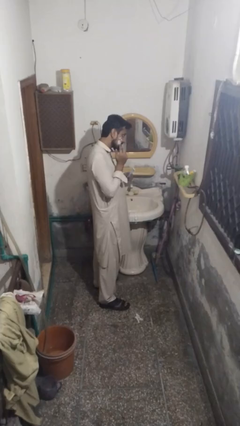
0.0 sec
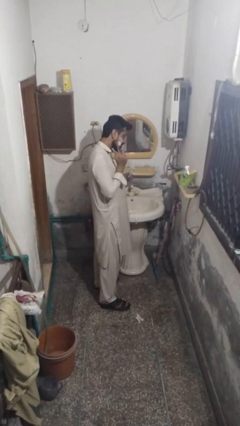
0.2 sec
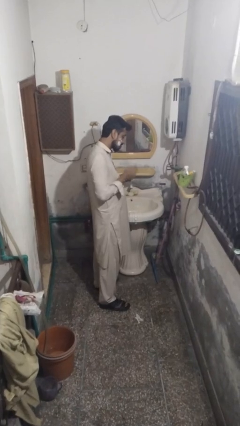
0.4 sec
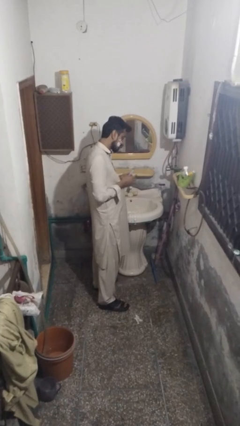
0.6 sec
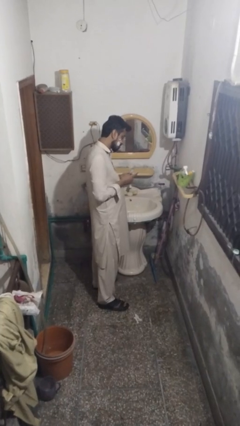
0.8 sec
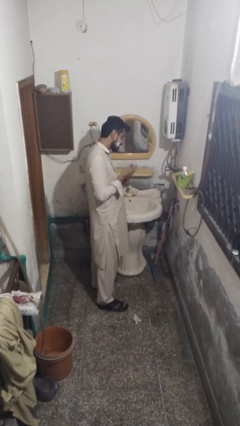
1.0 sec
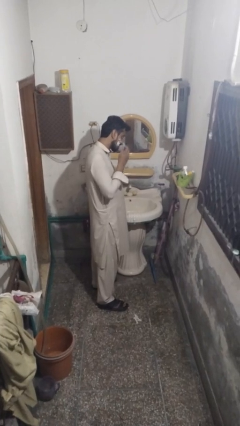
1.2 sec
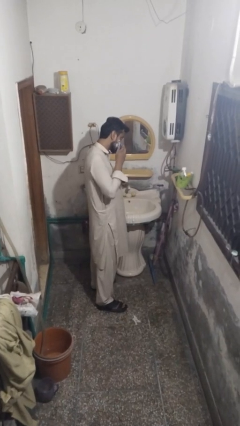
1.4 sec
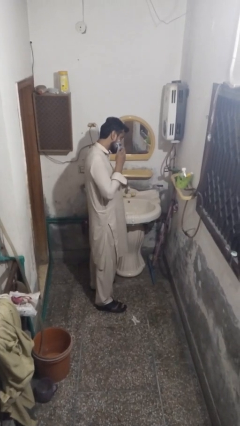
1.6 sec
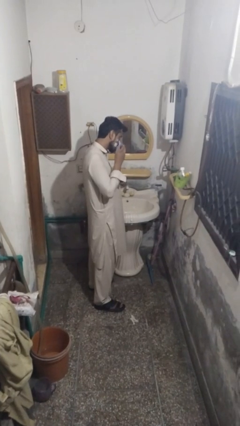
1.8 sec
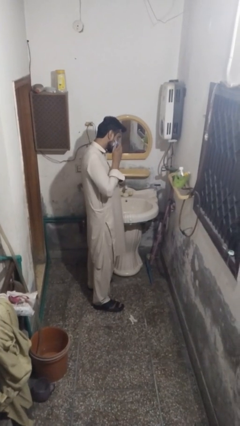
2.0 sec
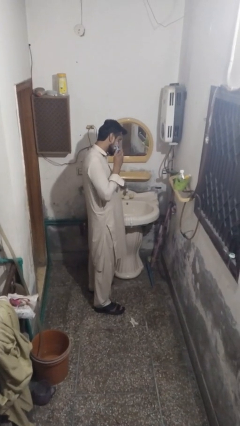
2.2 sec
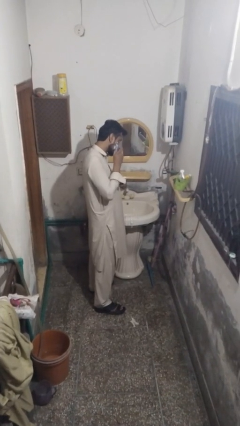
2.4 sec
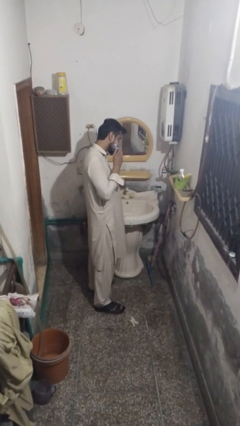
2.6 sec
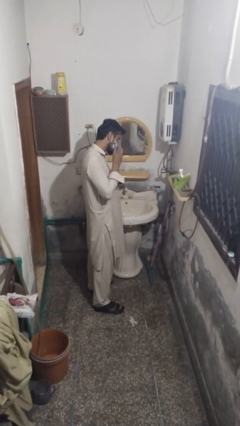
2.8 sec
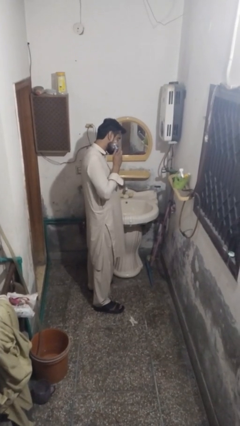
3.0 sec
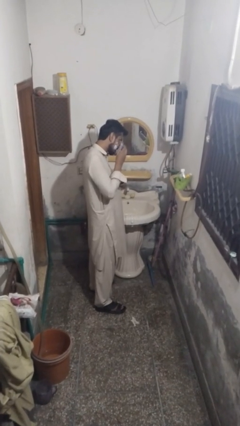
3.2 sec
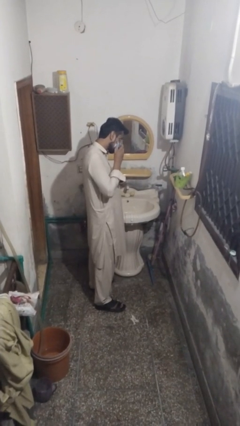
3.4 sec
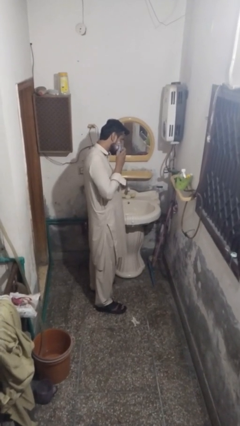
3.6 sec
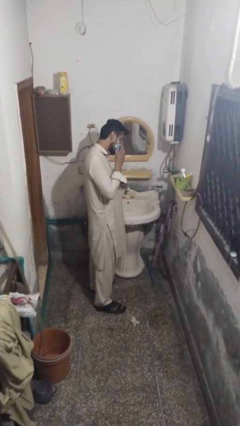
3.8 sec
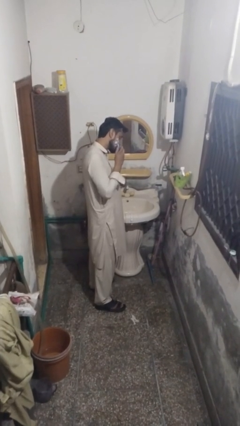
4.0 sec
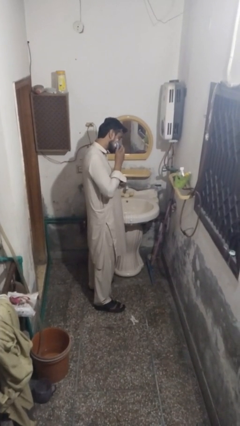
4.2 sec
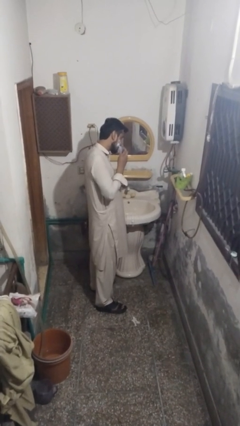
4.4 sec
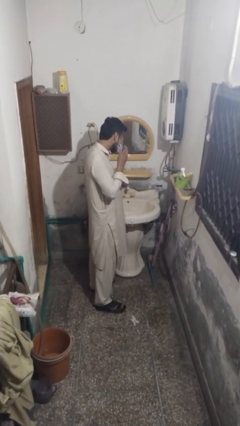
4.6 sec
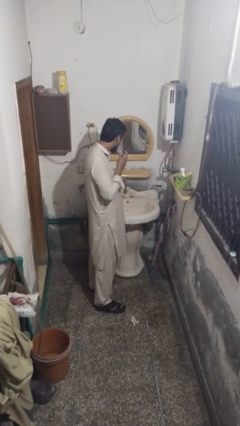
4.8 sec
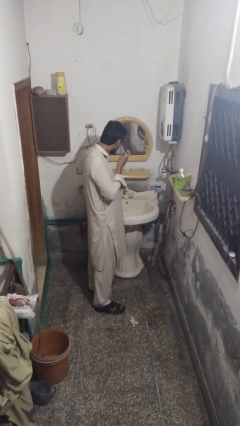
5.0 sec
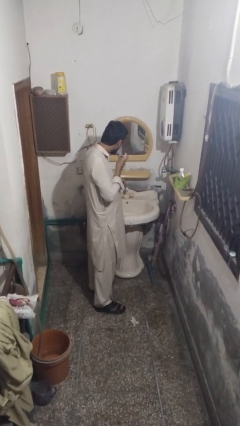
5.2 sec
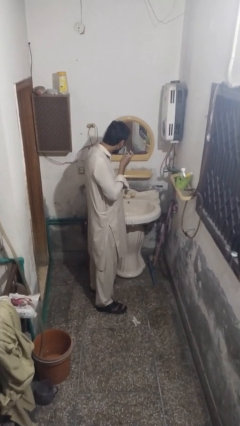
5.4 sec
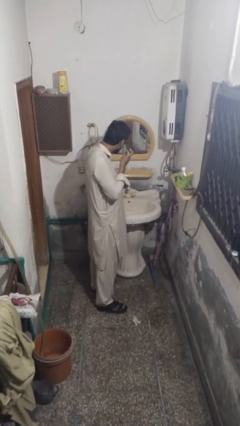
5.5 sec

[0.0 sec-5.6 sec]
person shaves face

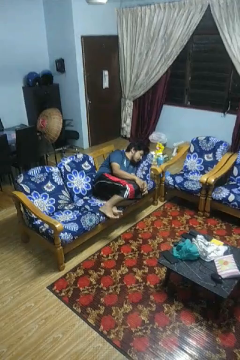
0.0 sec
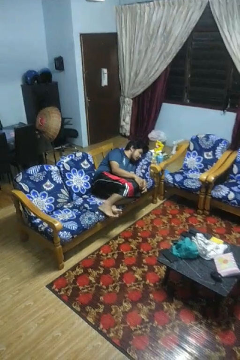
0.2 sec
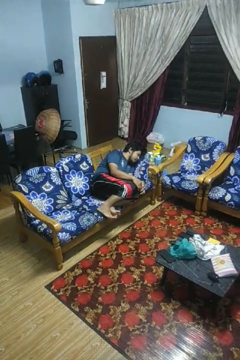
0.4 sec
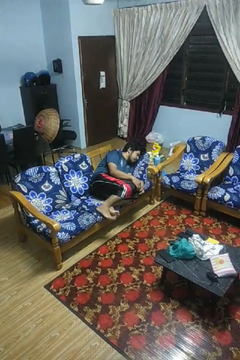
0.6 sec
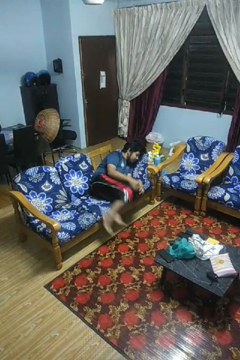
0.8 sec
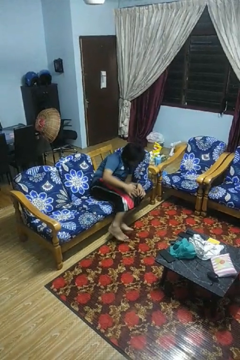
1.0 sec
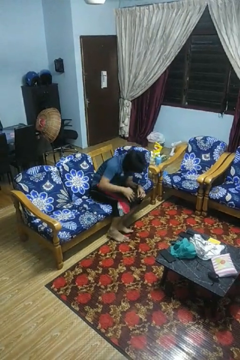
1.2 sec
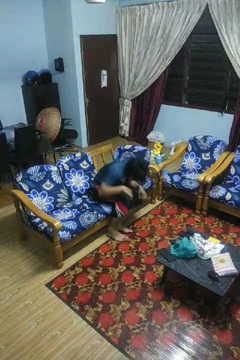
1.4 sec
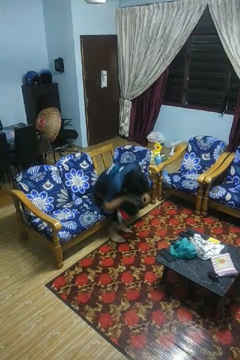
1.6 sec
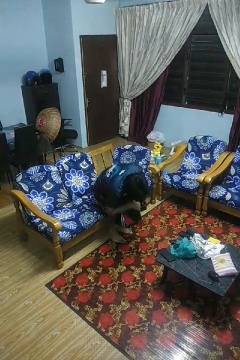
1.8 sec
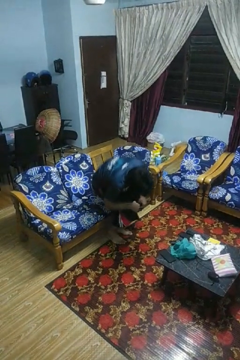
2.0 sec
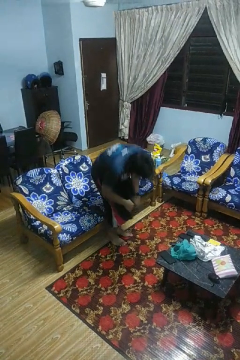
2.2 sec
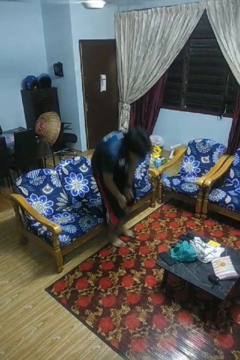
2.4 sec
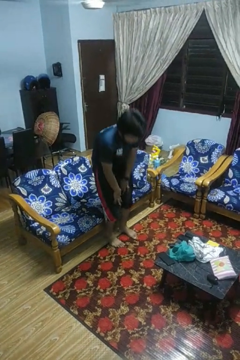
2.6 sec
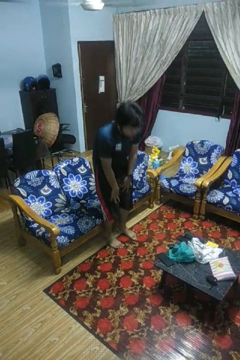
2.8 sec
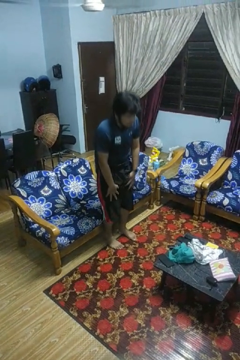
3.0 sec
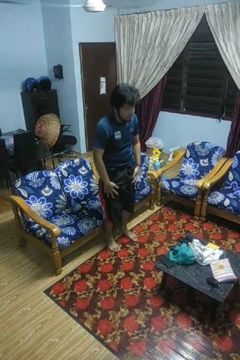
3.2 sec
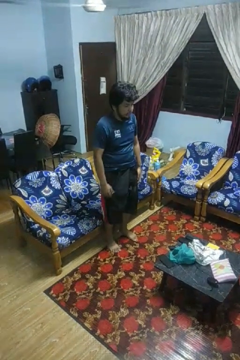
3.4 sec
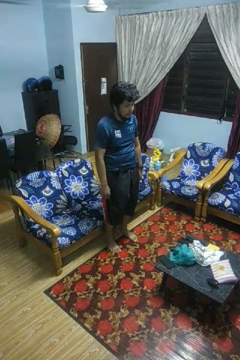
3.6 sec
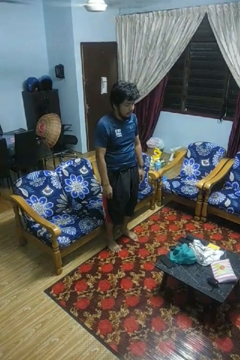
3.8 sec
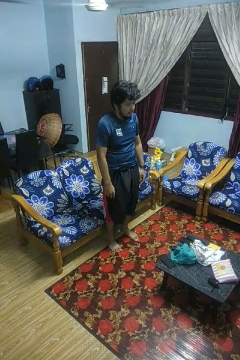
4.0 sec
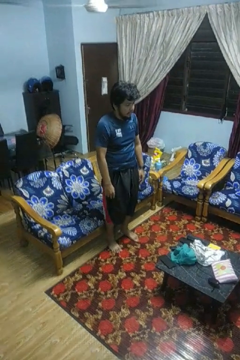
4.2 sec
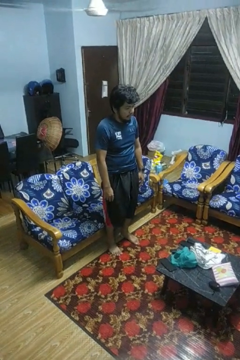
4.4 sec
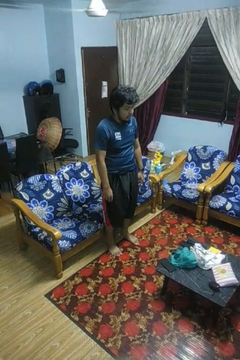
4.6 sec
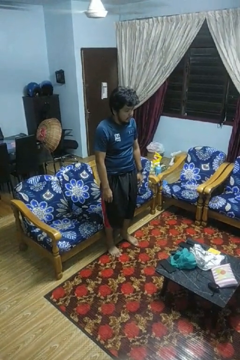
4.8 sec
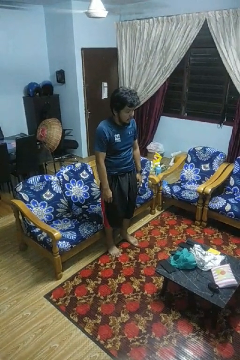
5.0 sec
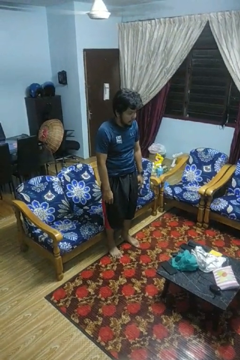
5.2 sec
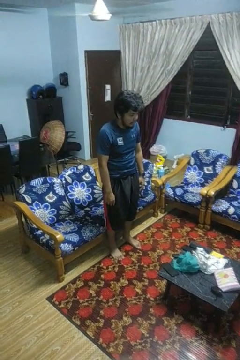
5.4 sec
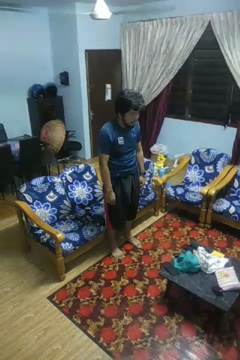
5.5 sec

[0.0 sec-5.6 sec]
person stands up

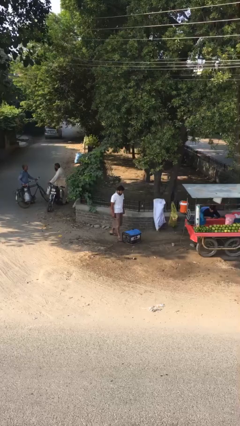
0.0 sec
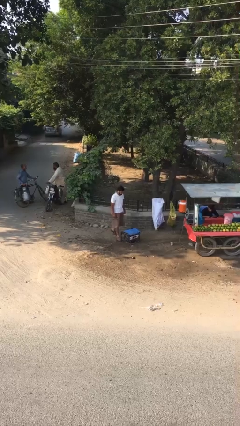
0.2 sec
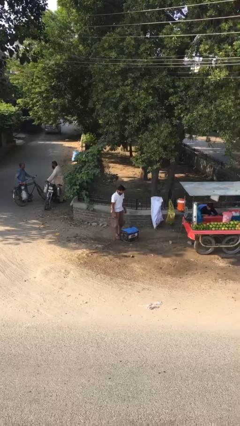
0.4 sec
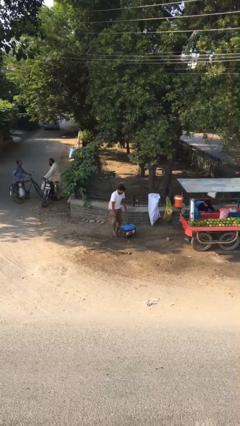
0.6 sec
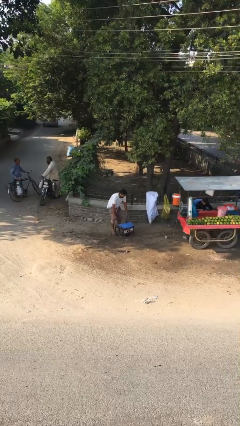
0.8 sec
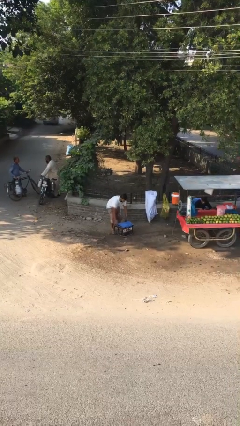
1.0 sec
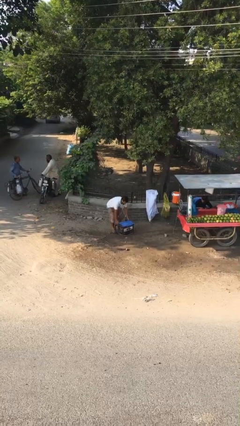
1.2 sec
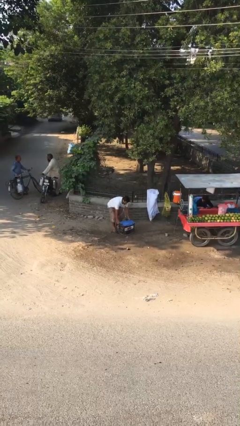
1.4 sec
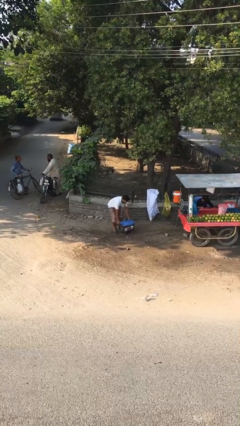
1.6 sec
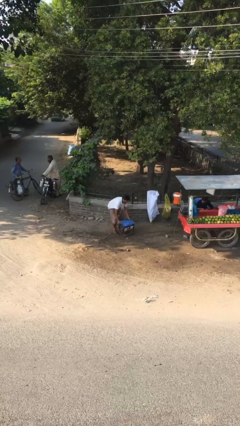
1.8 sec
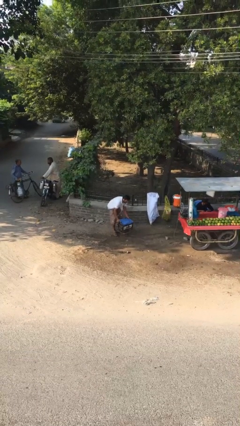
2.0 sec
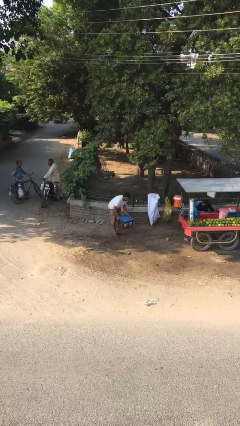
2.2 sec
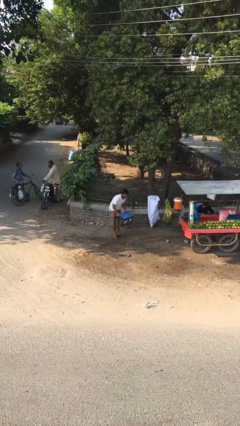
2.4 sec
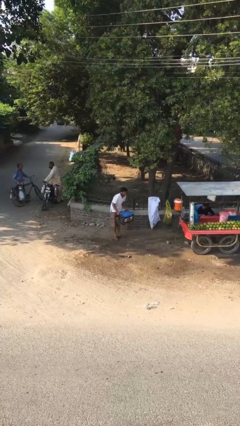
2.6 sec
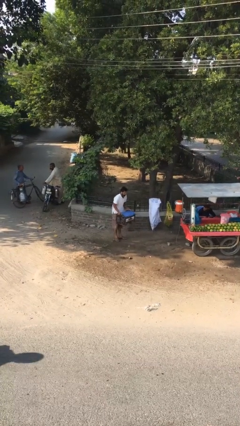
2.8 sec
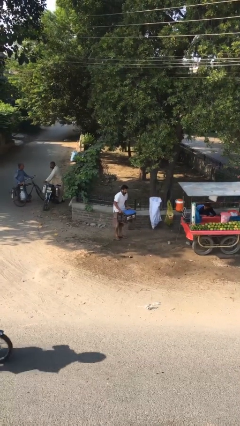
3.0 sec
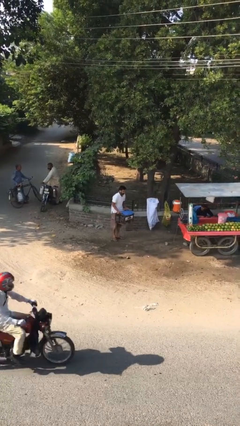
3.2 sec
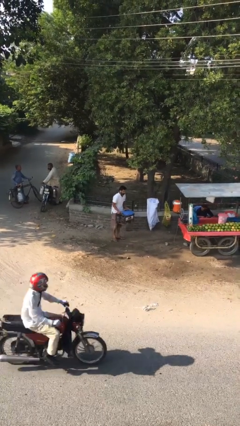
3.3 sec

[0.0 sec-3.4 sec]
person picks up object from floor

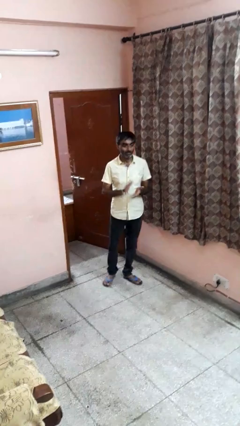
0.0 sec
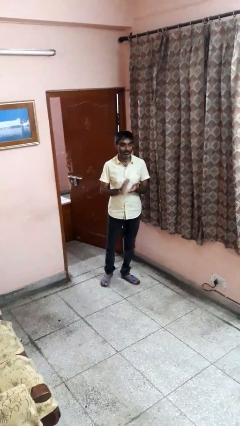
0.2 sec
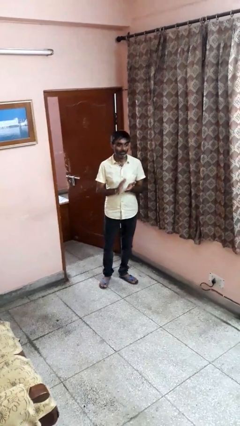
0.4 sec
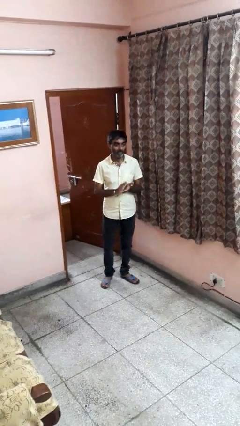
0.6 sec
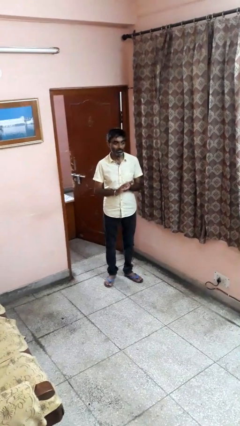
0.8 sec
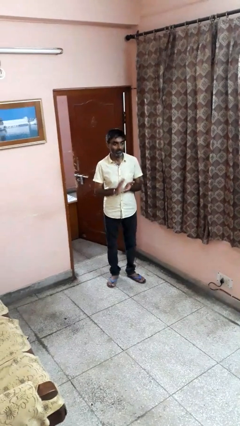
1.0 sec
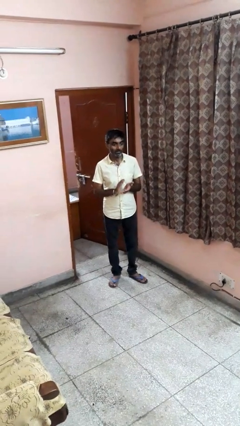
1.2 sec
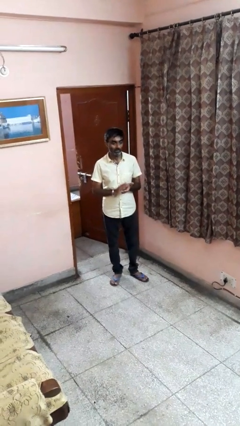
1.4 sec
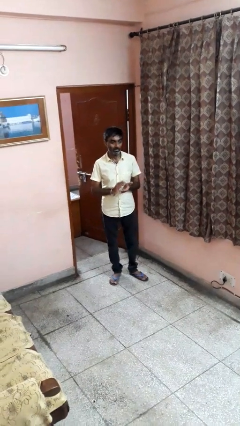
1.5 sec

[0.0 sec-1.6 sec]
person claps hands

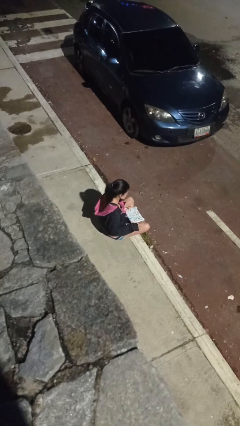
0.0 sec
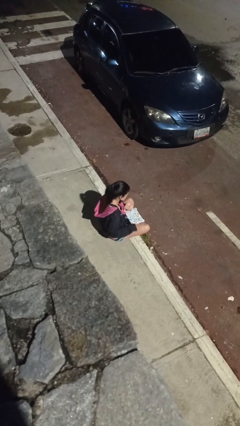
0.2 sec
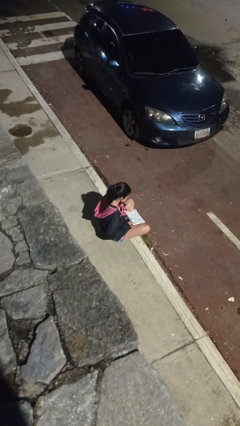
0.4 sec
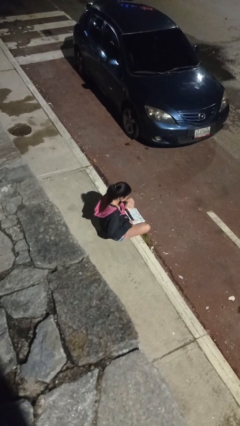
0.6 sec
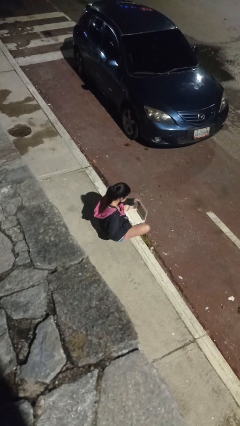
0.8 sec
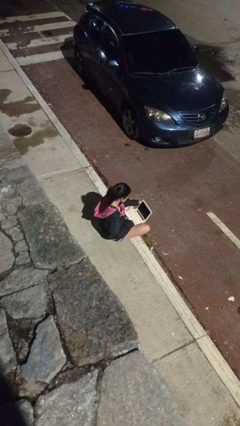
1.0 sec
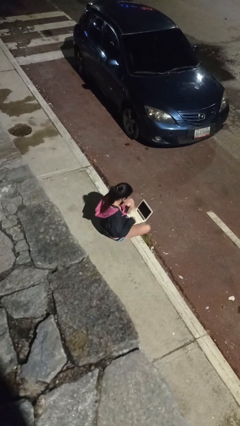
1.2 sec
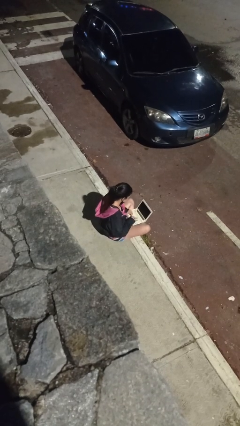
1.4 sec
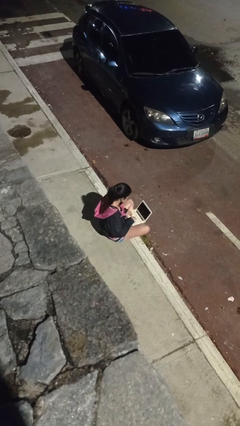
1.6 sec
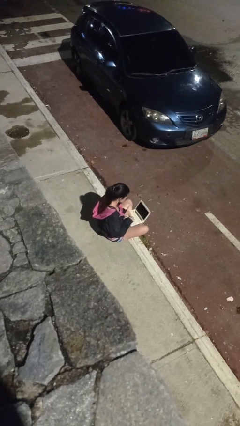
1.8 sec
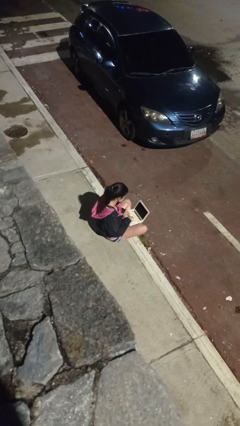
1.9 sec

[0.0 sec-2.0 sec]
person opens laptop

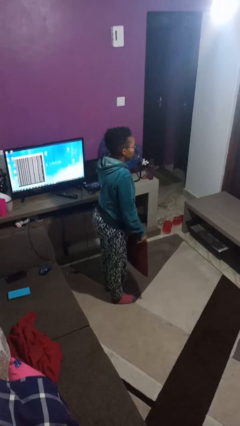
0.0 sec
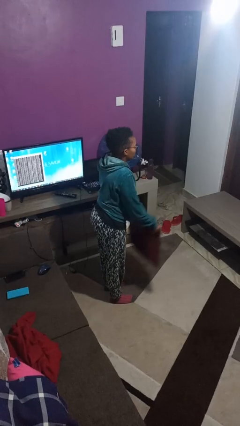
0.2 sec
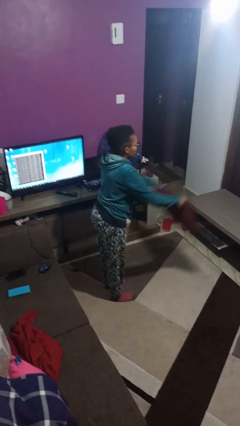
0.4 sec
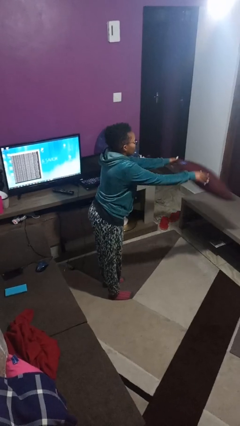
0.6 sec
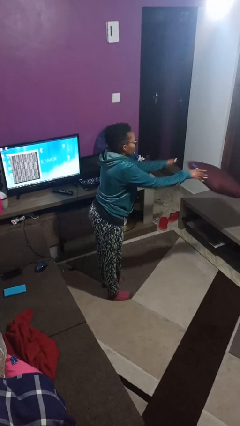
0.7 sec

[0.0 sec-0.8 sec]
person picks up object from table
